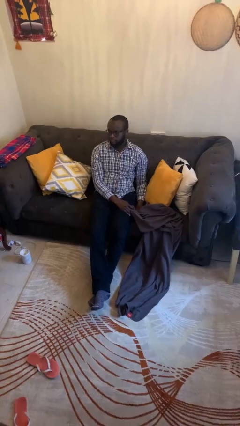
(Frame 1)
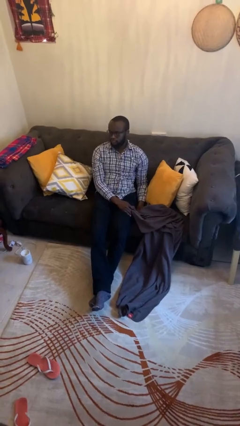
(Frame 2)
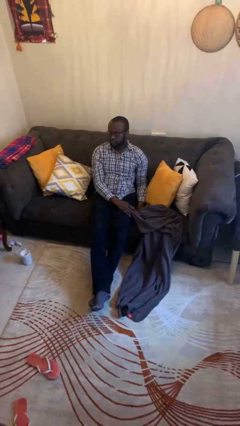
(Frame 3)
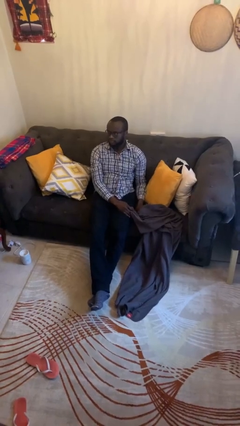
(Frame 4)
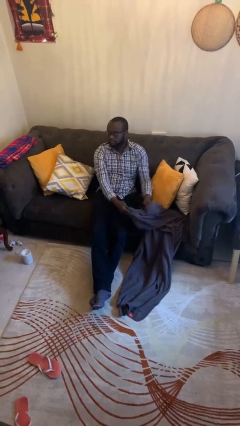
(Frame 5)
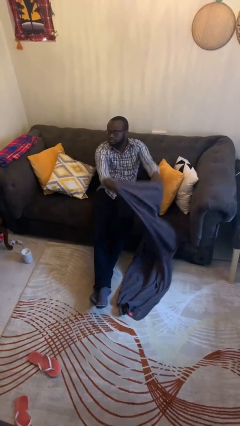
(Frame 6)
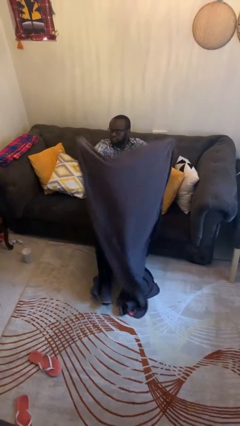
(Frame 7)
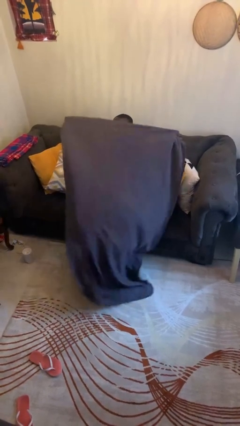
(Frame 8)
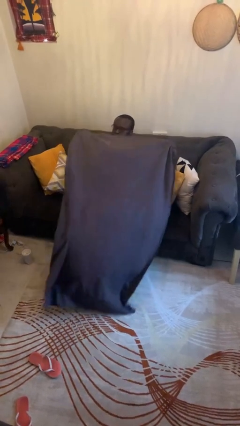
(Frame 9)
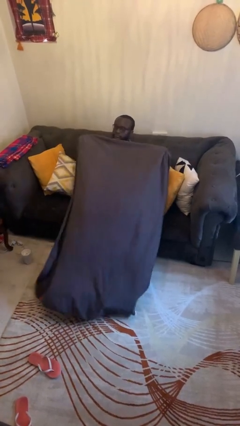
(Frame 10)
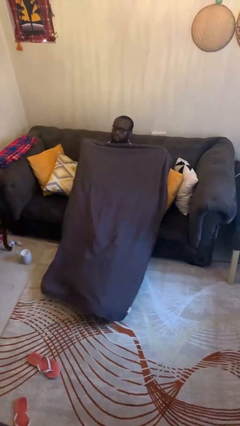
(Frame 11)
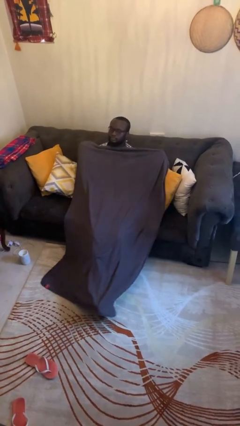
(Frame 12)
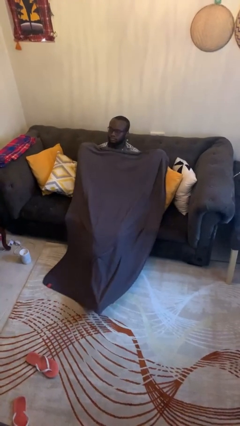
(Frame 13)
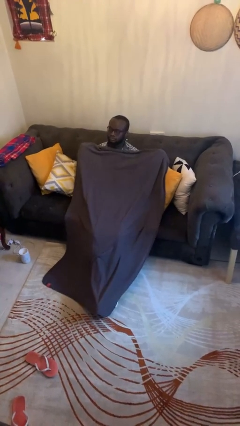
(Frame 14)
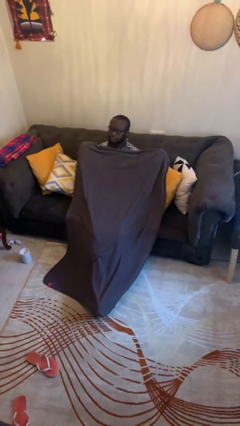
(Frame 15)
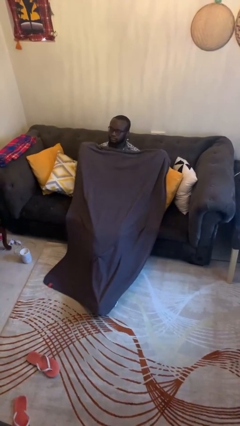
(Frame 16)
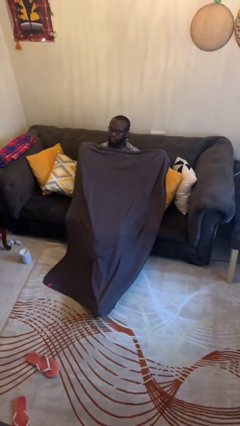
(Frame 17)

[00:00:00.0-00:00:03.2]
person covers with blanket

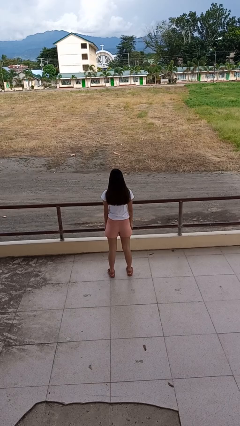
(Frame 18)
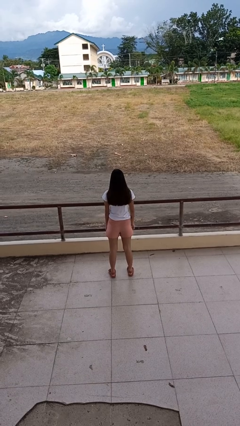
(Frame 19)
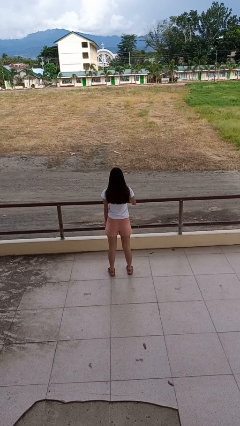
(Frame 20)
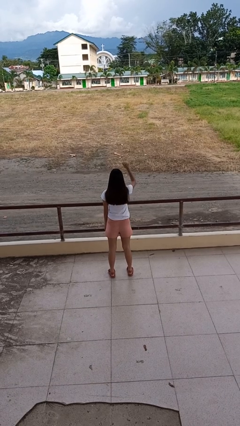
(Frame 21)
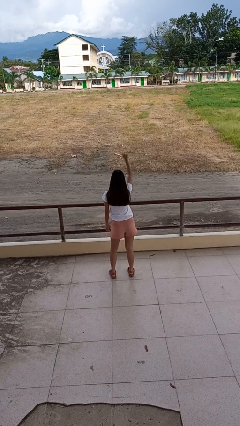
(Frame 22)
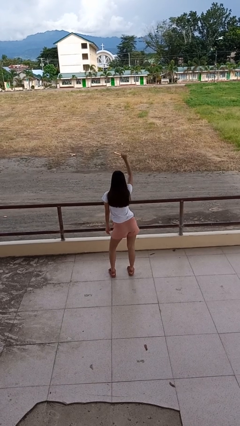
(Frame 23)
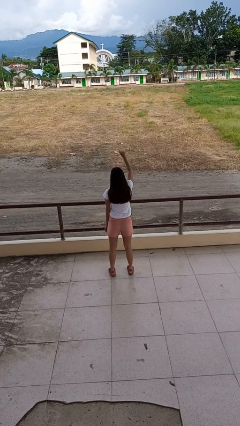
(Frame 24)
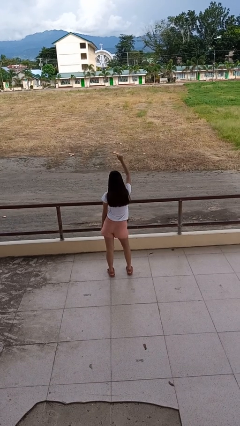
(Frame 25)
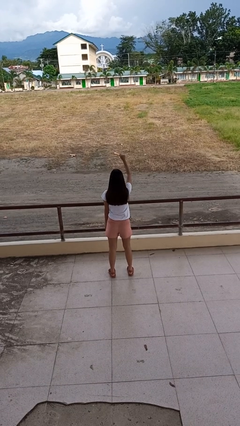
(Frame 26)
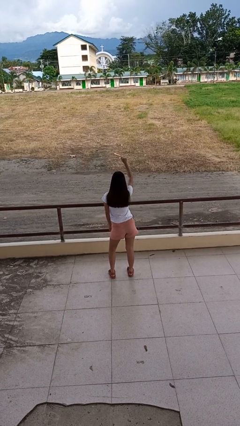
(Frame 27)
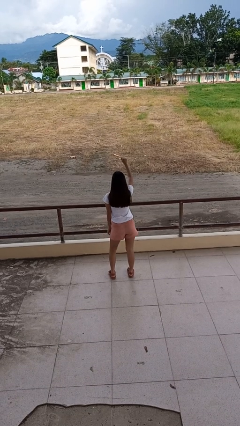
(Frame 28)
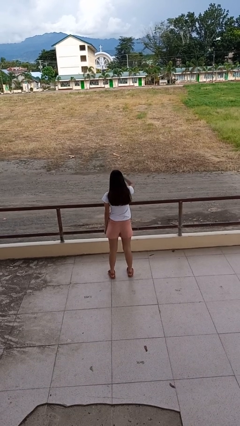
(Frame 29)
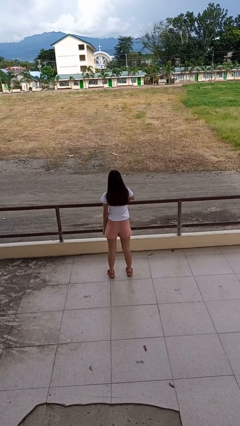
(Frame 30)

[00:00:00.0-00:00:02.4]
person dances in place

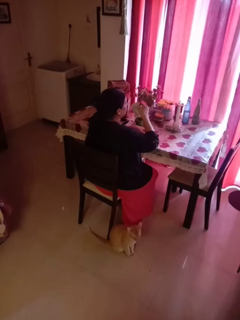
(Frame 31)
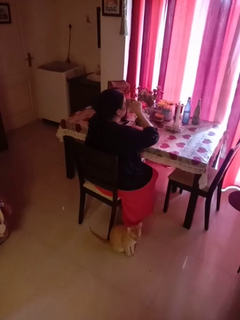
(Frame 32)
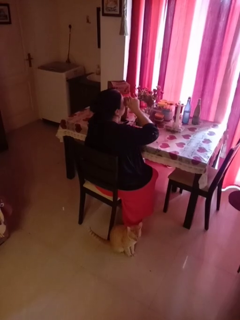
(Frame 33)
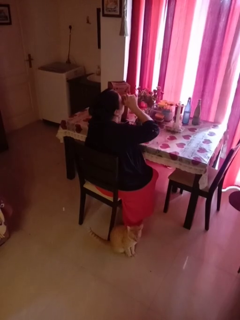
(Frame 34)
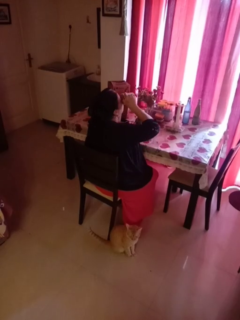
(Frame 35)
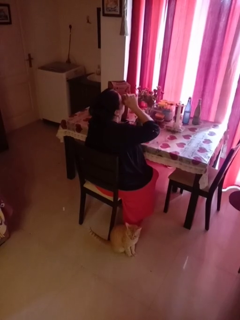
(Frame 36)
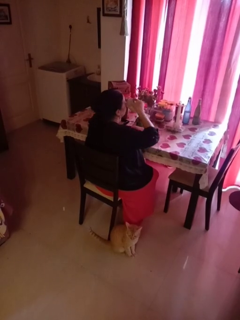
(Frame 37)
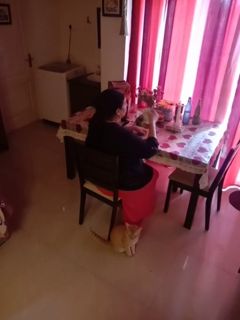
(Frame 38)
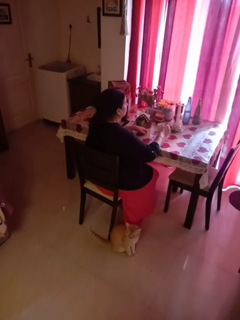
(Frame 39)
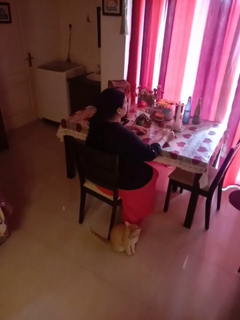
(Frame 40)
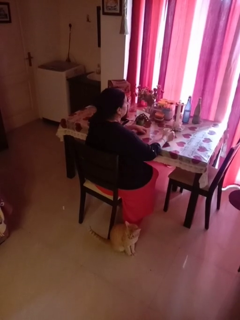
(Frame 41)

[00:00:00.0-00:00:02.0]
person drinks from mug

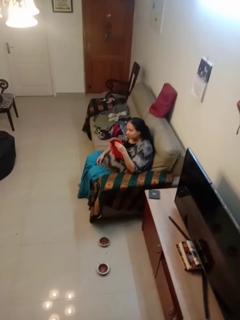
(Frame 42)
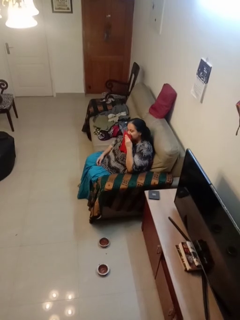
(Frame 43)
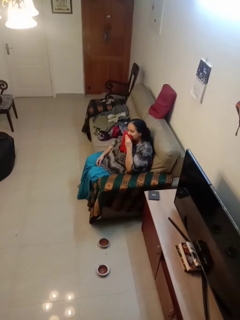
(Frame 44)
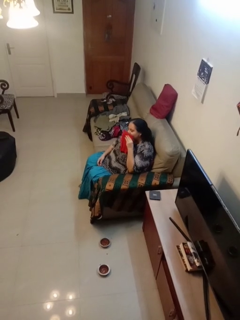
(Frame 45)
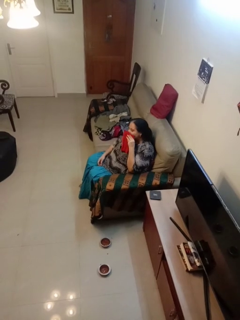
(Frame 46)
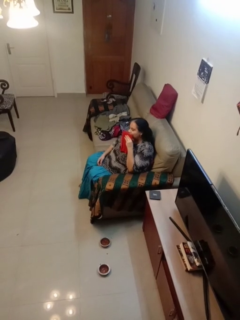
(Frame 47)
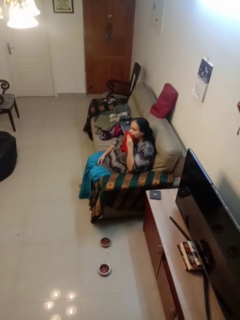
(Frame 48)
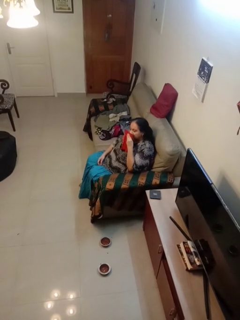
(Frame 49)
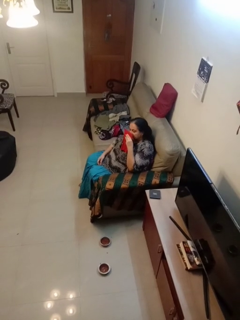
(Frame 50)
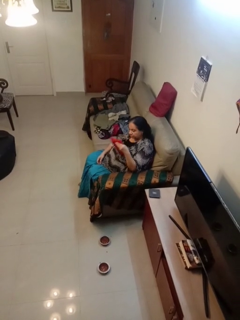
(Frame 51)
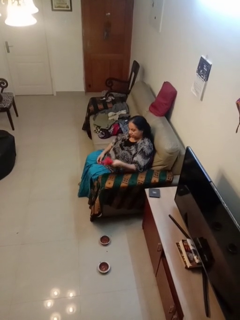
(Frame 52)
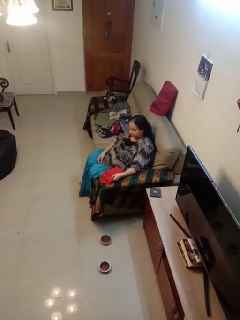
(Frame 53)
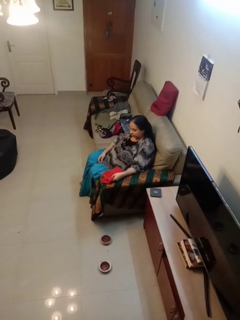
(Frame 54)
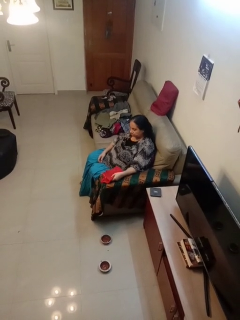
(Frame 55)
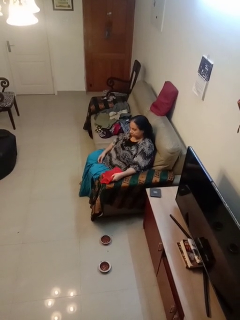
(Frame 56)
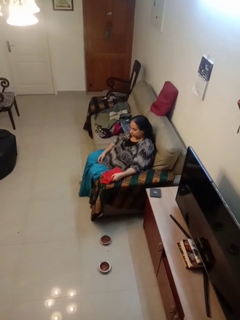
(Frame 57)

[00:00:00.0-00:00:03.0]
person wipes mouth with napkin

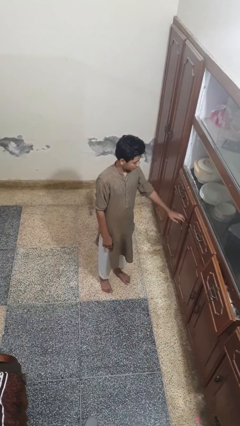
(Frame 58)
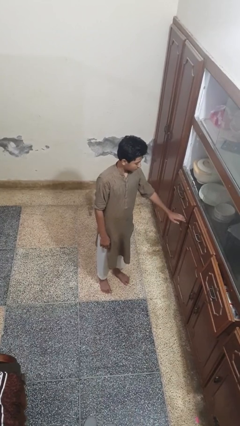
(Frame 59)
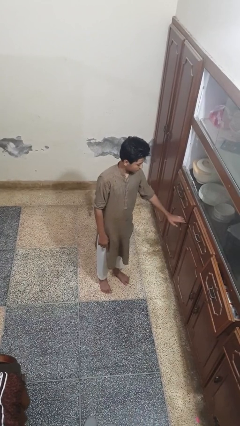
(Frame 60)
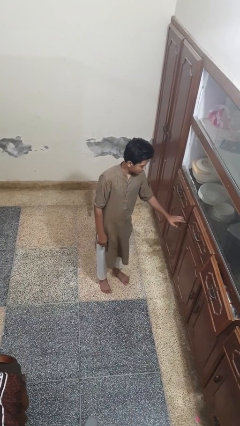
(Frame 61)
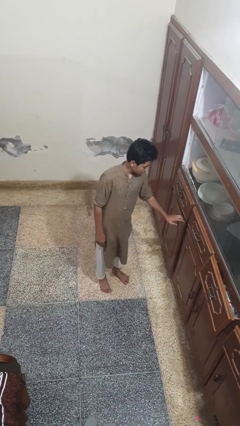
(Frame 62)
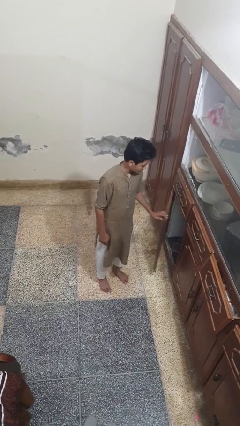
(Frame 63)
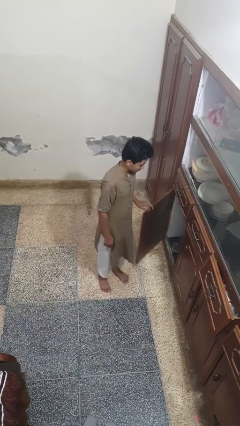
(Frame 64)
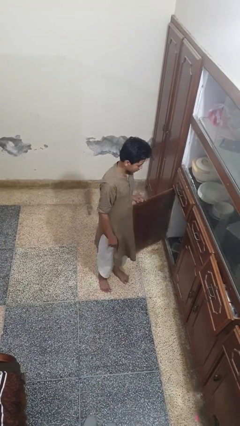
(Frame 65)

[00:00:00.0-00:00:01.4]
person opens cabinet

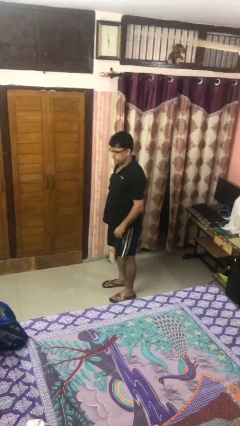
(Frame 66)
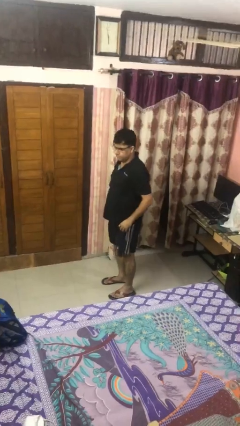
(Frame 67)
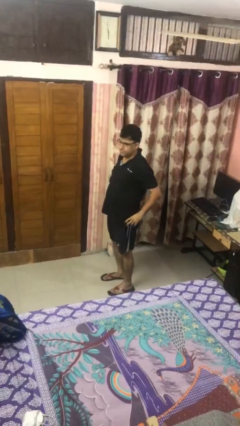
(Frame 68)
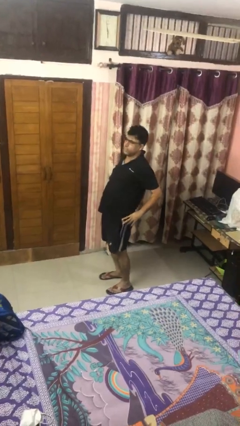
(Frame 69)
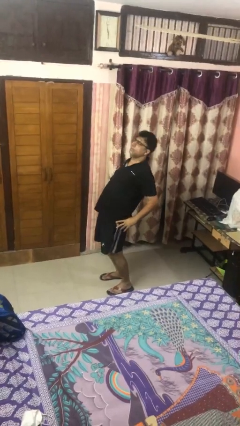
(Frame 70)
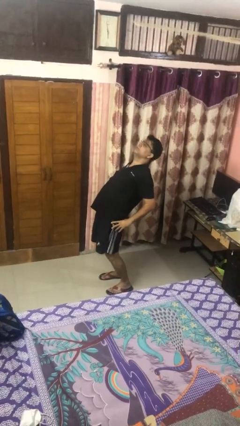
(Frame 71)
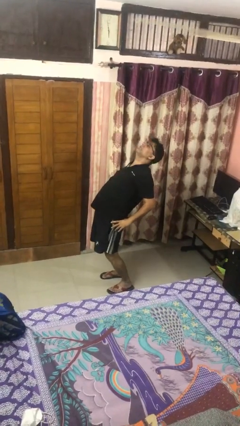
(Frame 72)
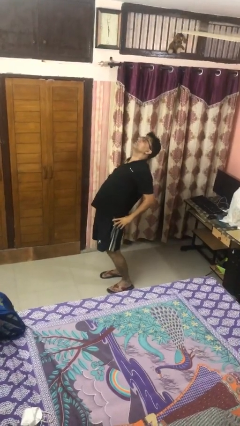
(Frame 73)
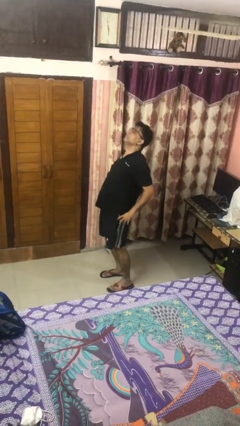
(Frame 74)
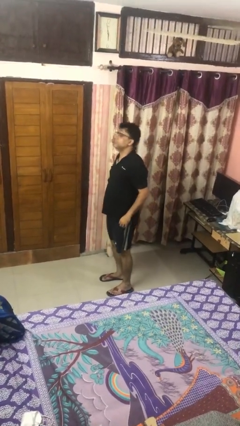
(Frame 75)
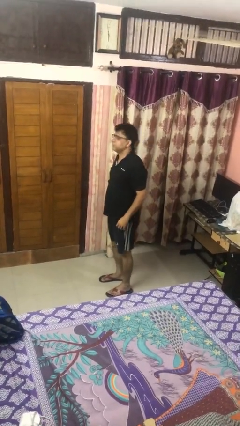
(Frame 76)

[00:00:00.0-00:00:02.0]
person stretches back

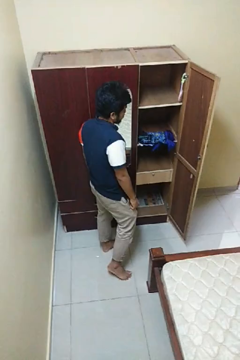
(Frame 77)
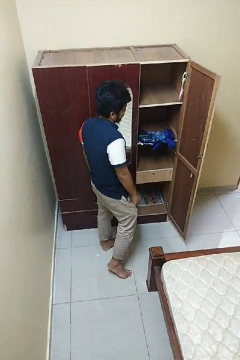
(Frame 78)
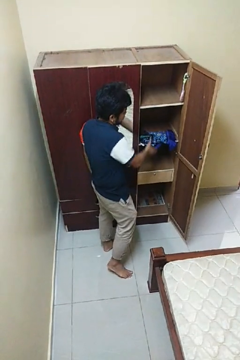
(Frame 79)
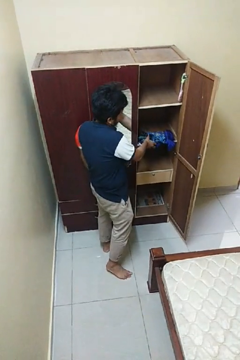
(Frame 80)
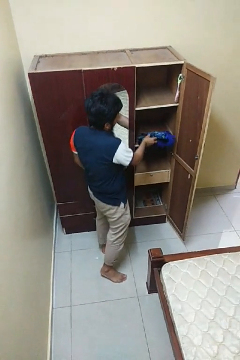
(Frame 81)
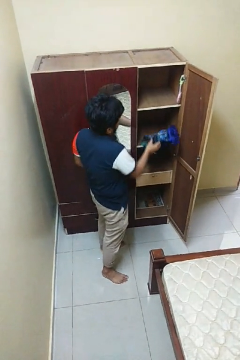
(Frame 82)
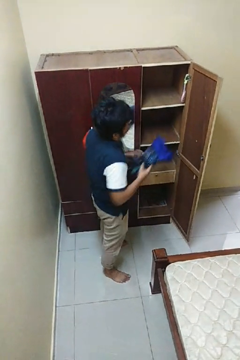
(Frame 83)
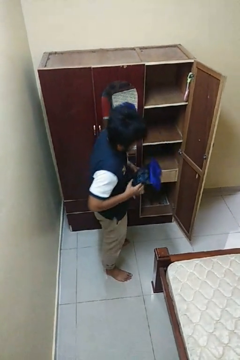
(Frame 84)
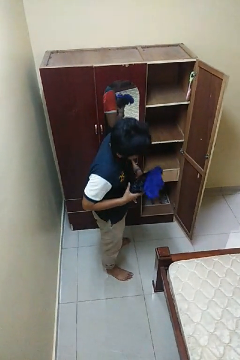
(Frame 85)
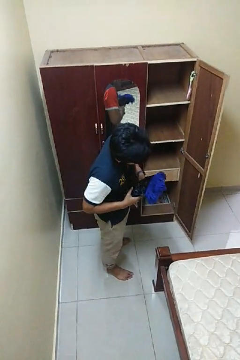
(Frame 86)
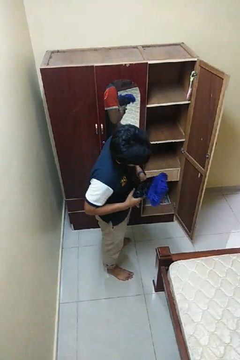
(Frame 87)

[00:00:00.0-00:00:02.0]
person picks up object from cabinet

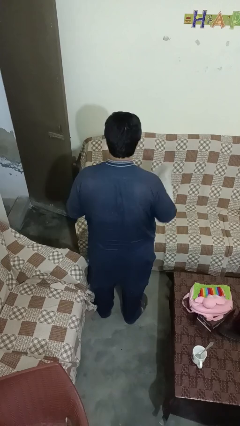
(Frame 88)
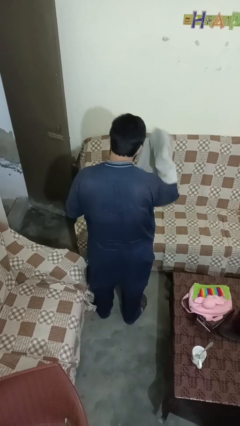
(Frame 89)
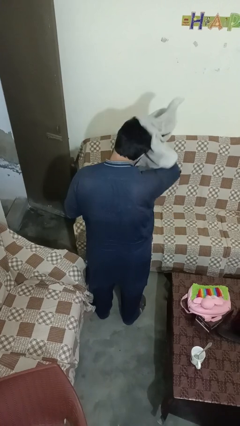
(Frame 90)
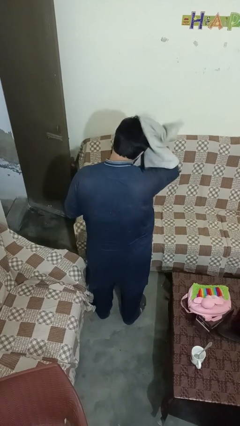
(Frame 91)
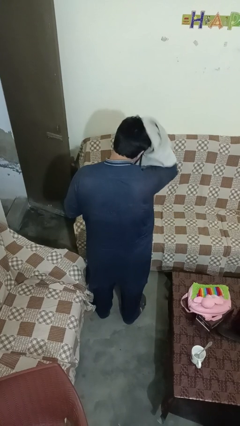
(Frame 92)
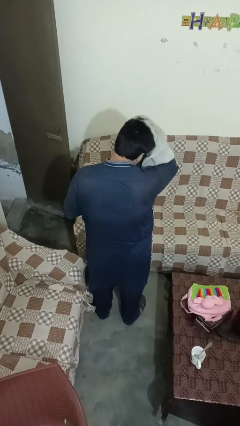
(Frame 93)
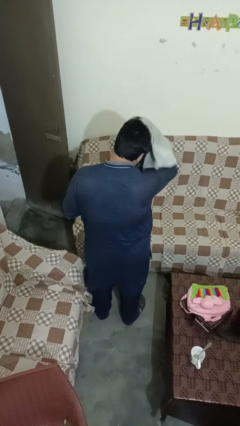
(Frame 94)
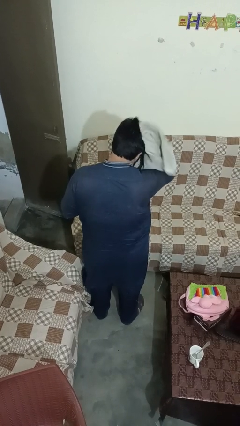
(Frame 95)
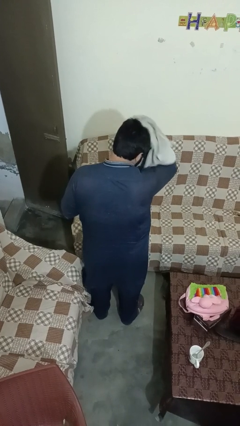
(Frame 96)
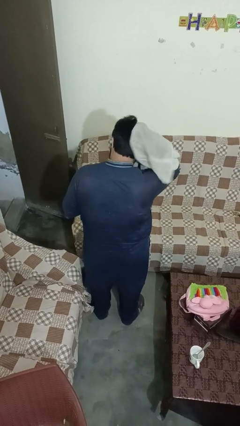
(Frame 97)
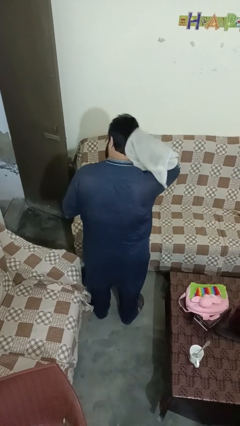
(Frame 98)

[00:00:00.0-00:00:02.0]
person dries hair with towel

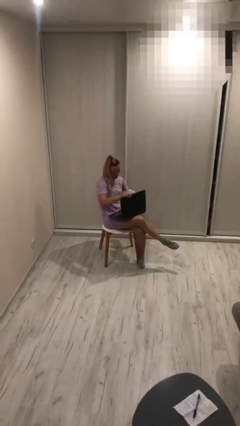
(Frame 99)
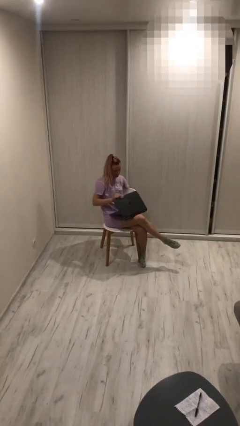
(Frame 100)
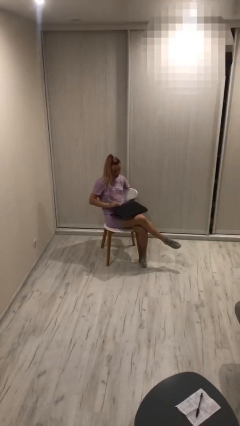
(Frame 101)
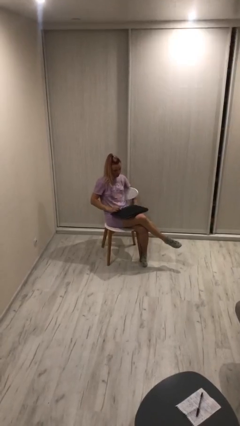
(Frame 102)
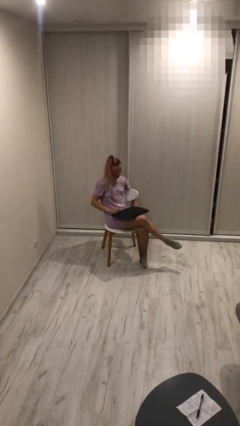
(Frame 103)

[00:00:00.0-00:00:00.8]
person closes laptop
